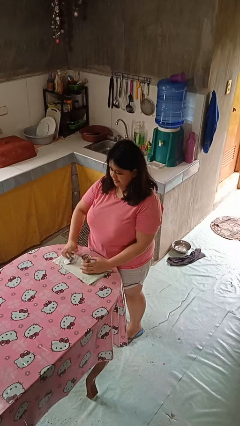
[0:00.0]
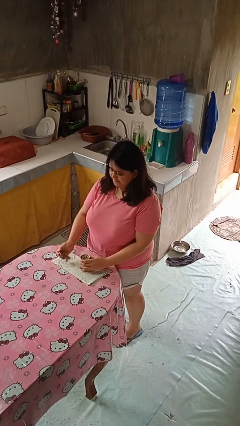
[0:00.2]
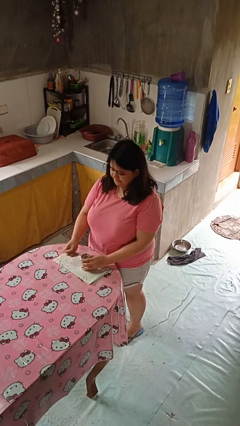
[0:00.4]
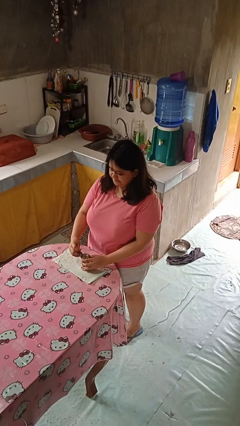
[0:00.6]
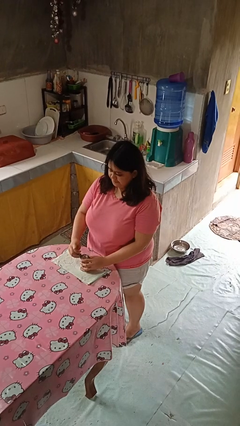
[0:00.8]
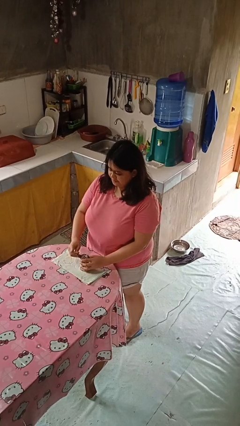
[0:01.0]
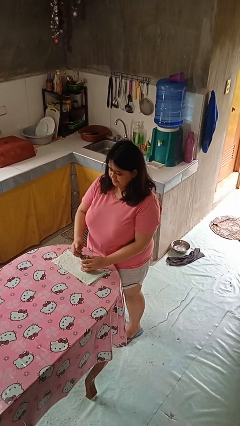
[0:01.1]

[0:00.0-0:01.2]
person opens can with can opener

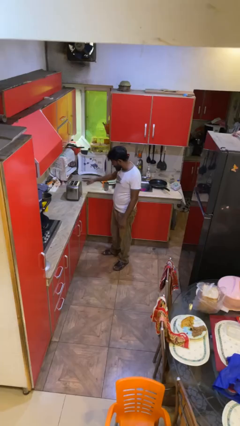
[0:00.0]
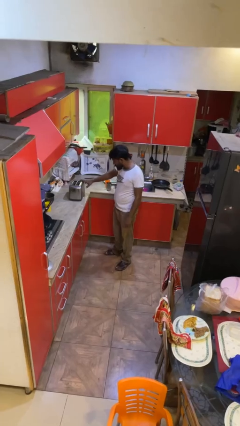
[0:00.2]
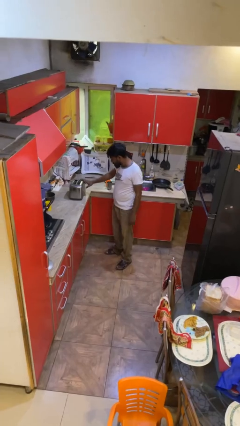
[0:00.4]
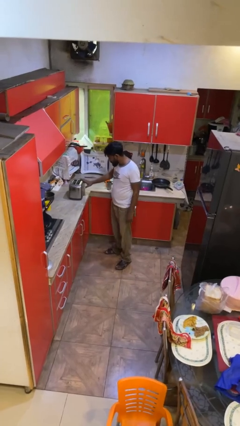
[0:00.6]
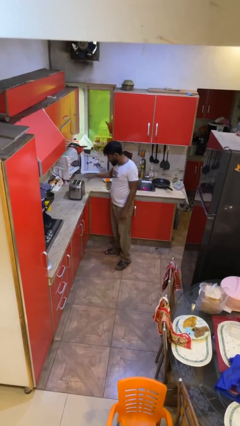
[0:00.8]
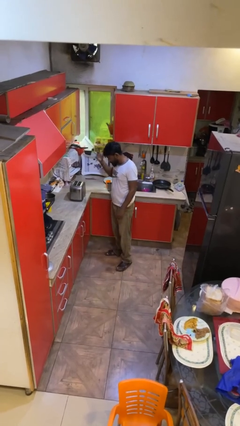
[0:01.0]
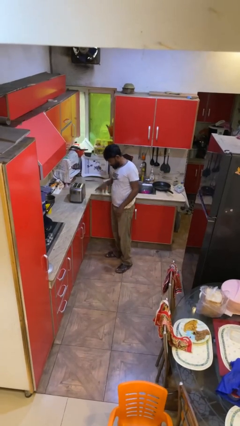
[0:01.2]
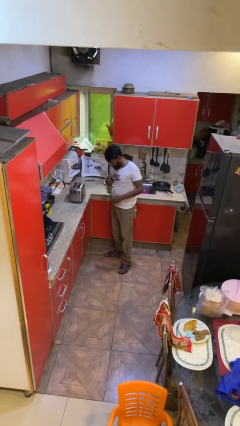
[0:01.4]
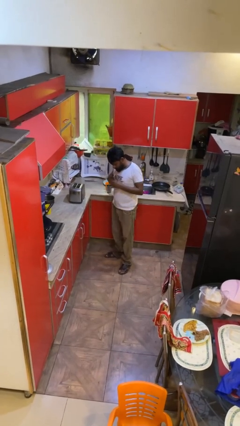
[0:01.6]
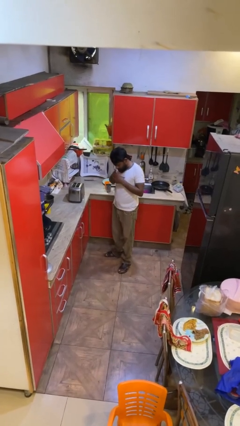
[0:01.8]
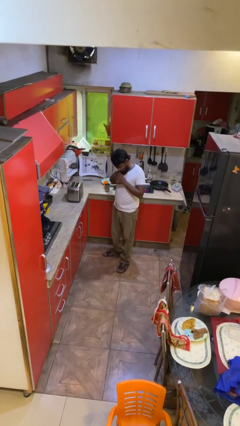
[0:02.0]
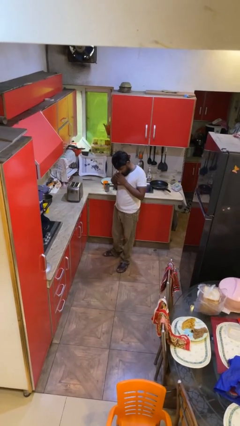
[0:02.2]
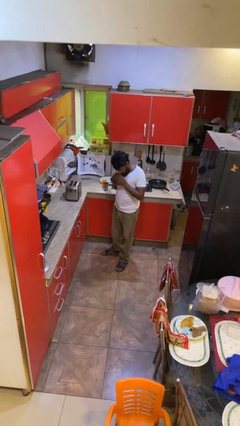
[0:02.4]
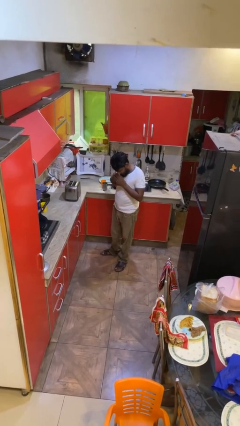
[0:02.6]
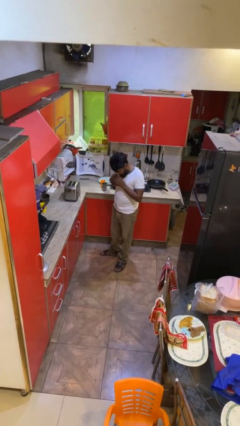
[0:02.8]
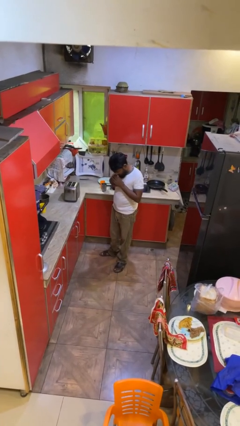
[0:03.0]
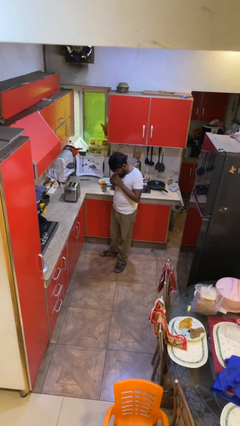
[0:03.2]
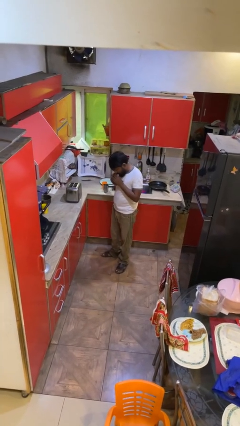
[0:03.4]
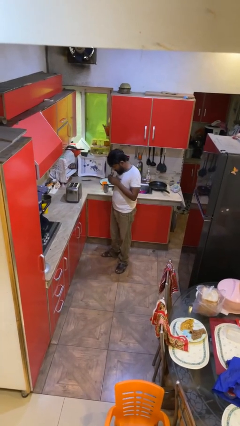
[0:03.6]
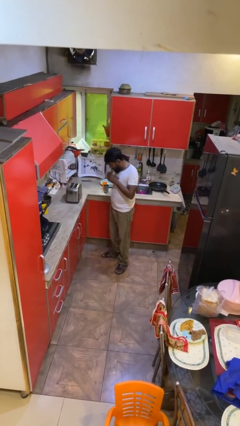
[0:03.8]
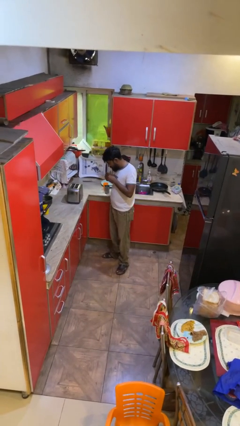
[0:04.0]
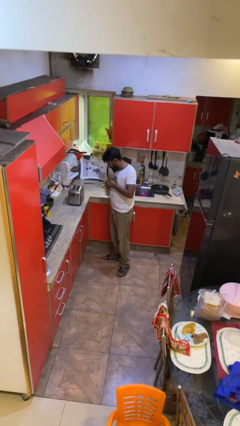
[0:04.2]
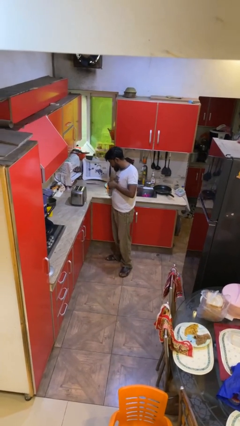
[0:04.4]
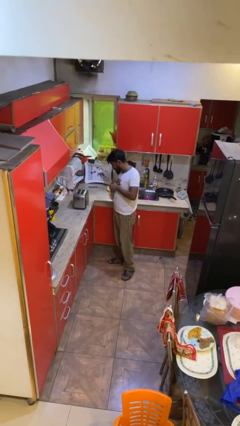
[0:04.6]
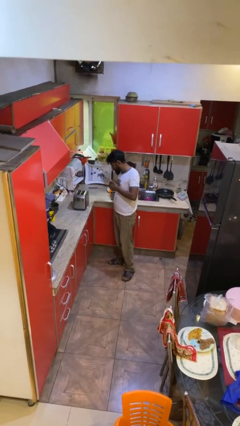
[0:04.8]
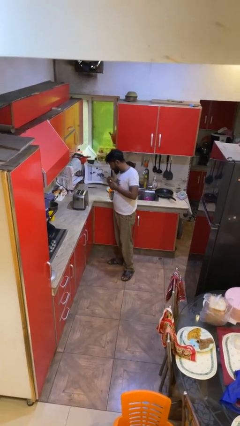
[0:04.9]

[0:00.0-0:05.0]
person burns hand

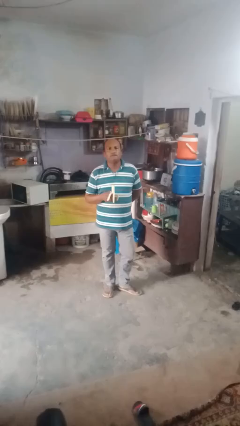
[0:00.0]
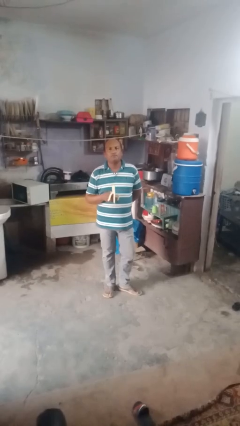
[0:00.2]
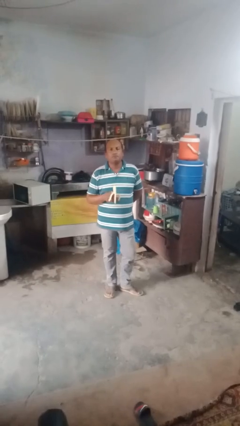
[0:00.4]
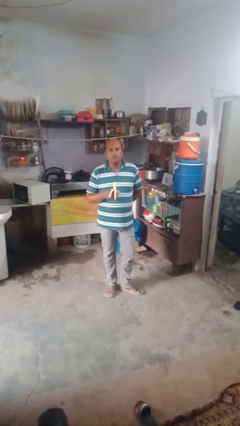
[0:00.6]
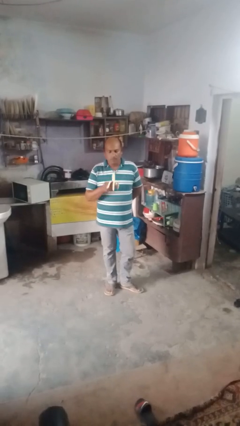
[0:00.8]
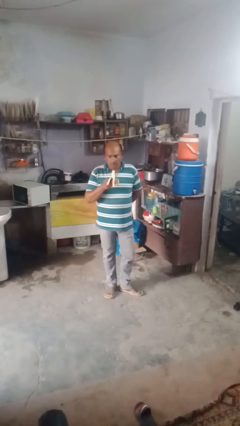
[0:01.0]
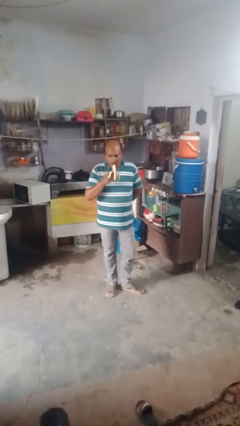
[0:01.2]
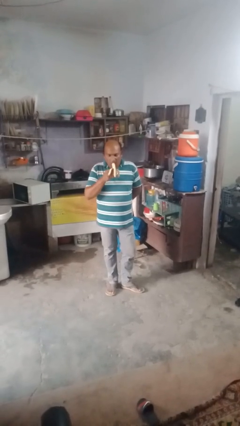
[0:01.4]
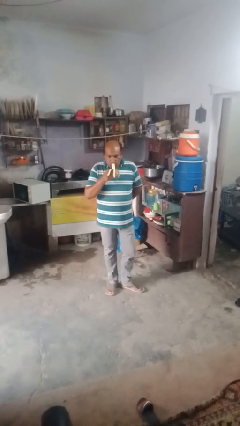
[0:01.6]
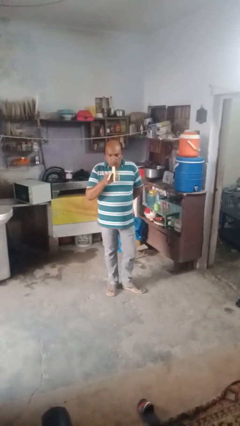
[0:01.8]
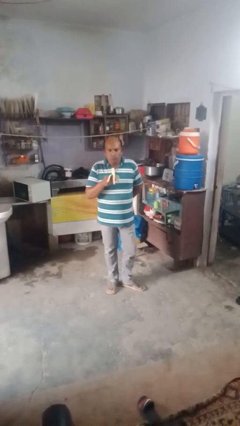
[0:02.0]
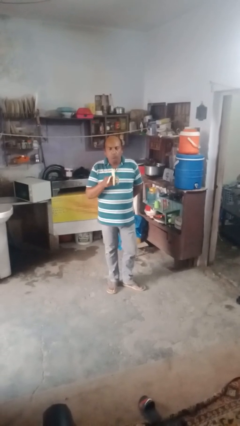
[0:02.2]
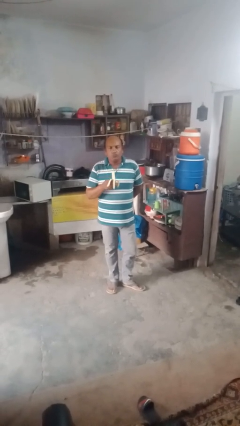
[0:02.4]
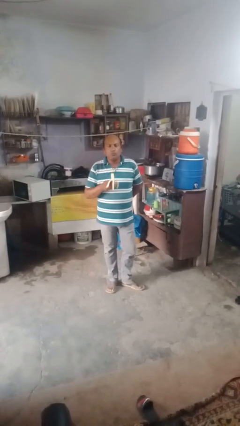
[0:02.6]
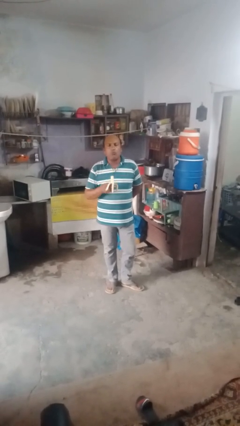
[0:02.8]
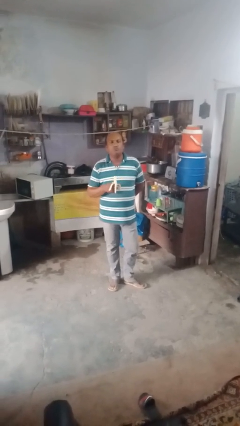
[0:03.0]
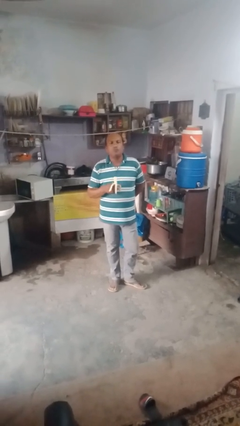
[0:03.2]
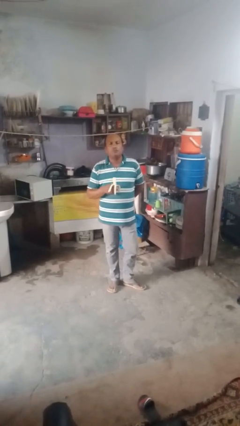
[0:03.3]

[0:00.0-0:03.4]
person eats banana

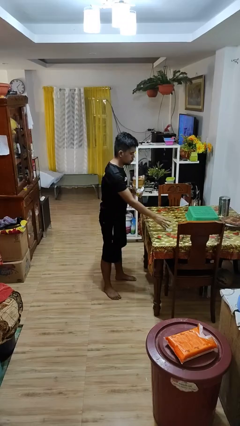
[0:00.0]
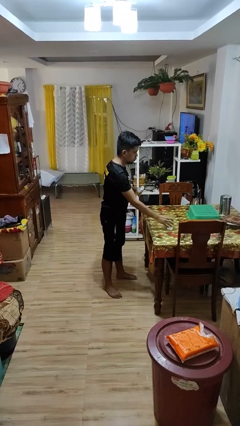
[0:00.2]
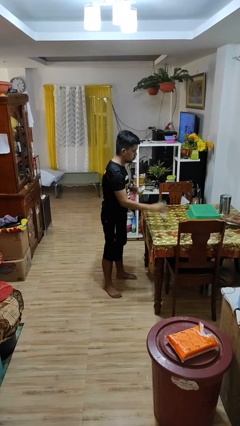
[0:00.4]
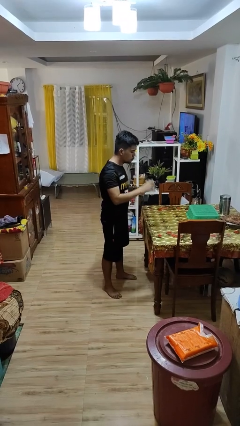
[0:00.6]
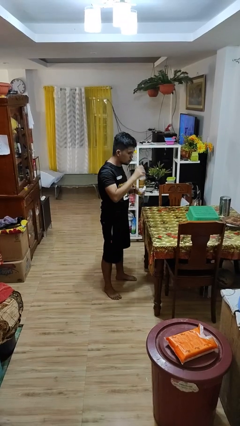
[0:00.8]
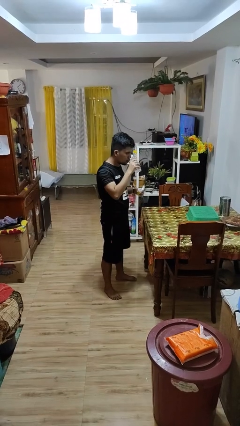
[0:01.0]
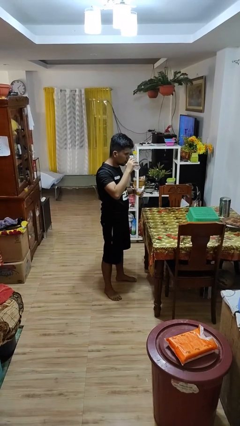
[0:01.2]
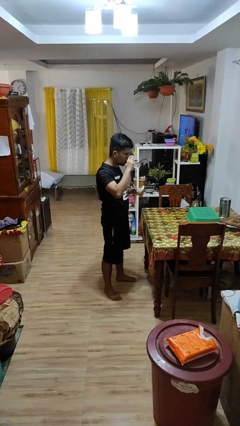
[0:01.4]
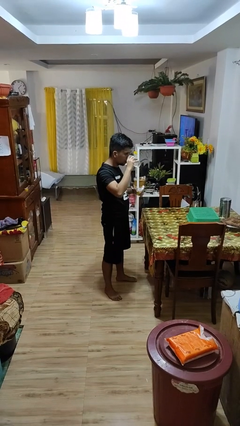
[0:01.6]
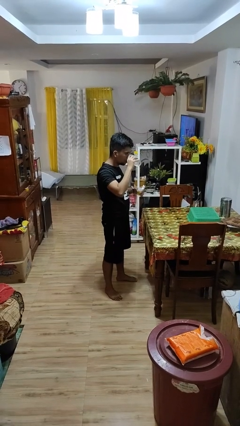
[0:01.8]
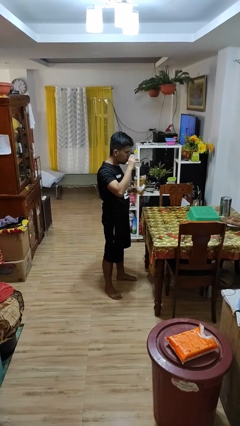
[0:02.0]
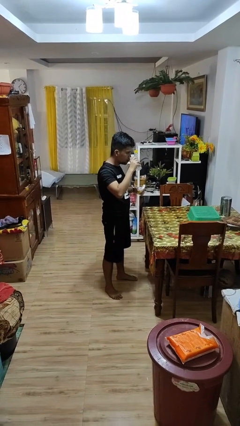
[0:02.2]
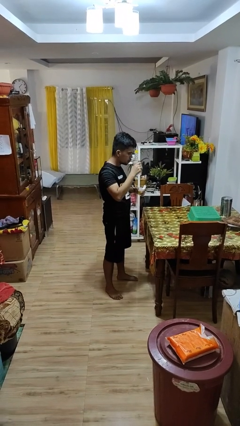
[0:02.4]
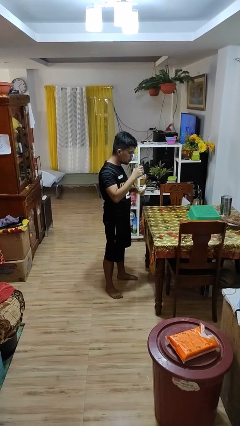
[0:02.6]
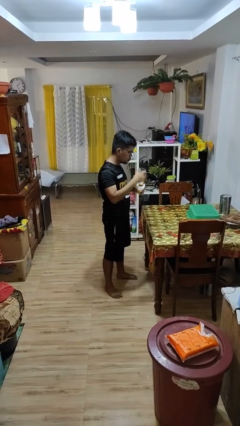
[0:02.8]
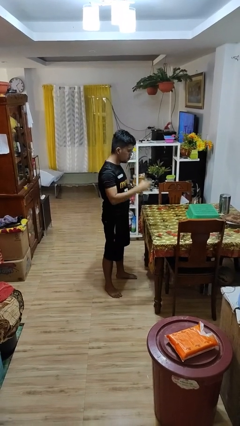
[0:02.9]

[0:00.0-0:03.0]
person drinks from cup

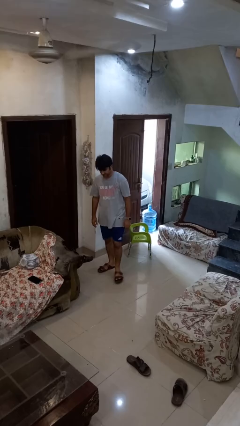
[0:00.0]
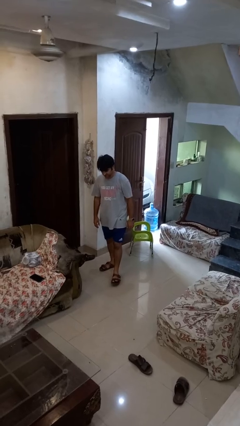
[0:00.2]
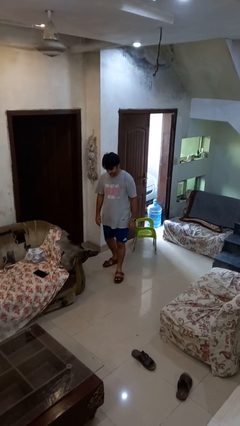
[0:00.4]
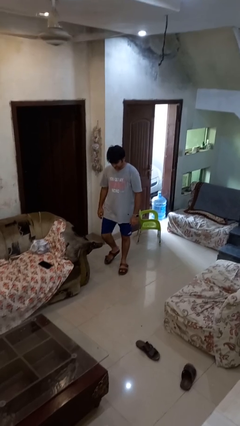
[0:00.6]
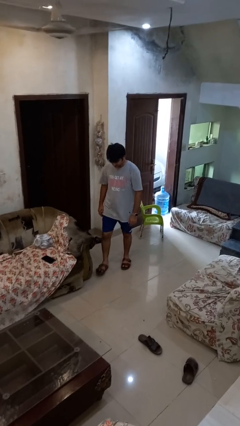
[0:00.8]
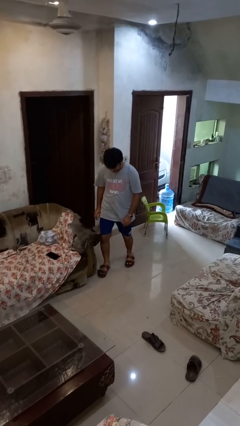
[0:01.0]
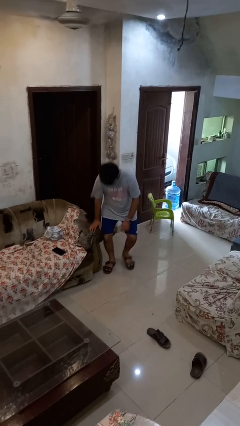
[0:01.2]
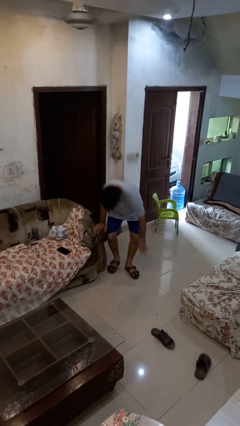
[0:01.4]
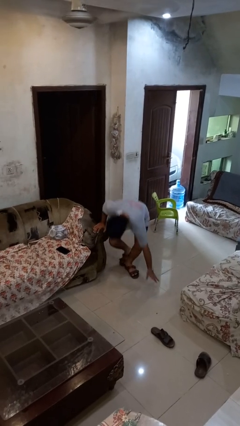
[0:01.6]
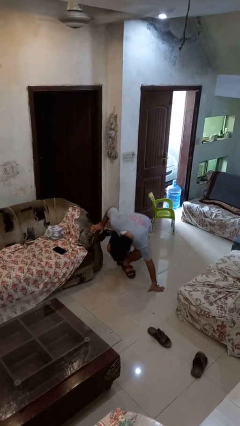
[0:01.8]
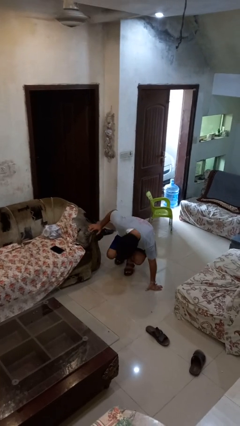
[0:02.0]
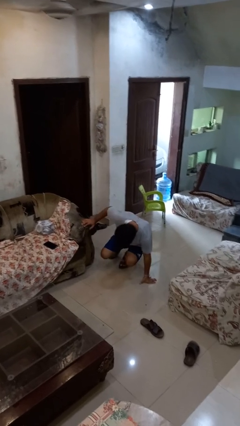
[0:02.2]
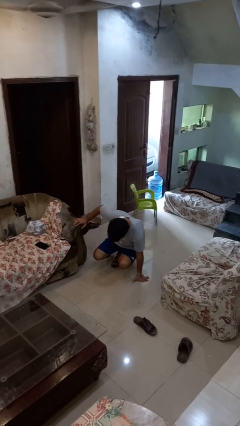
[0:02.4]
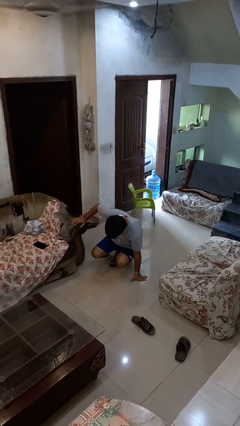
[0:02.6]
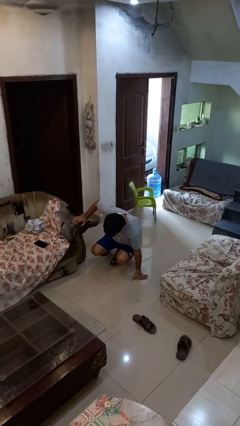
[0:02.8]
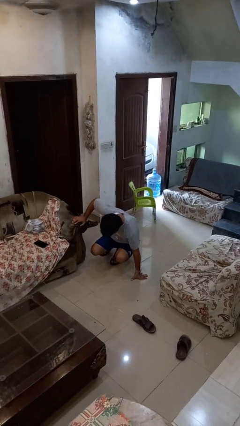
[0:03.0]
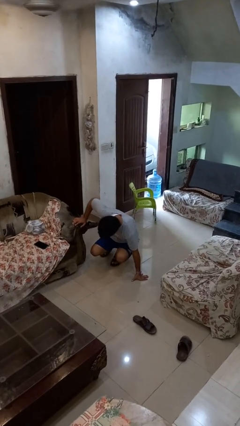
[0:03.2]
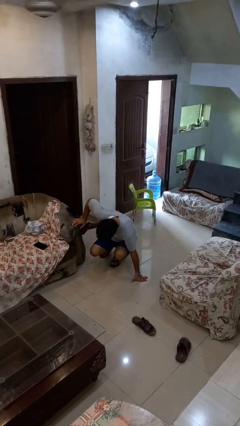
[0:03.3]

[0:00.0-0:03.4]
person trips on object on floor

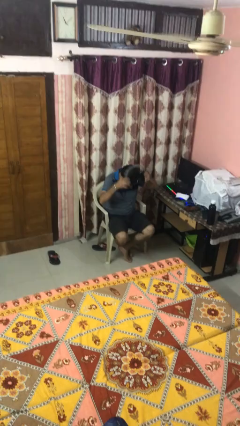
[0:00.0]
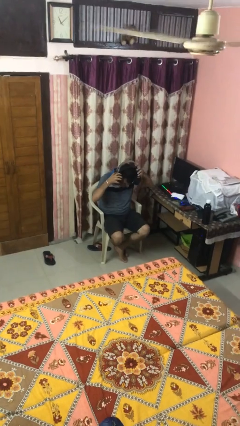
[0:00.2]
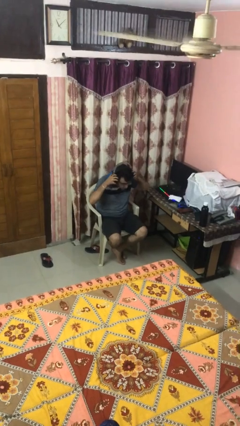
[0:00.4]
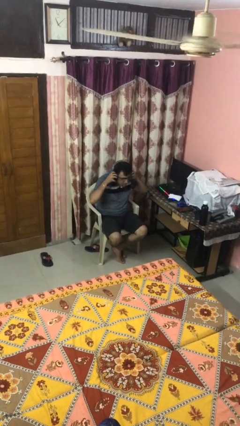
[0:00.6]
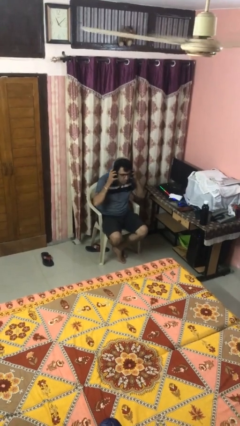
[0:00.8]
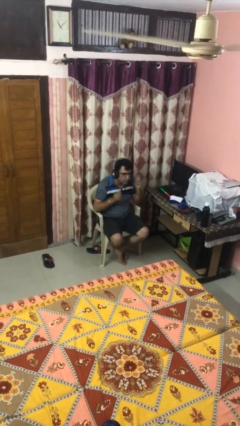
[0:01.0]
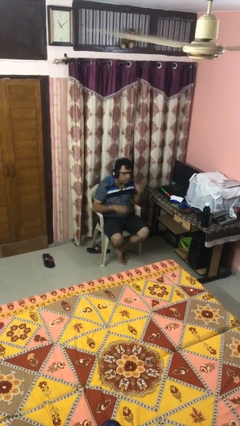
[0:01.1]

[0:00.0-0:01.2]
person puts on headphones
